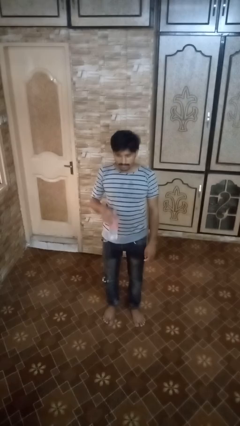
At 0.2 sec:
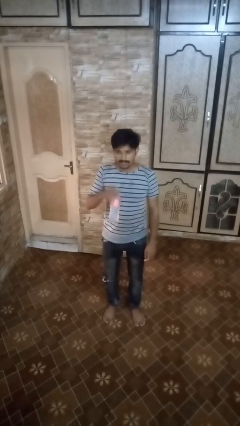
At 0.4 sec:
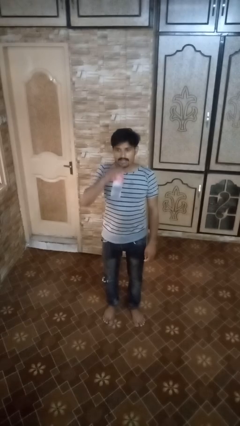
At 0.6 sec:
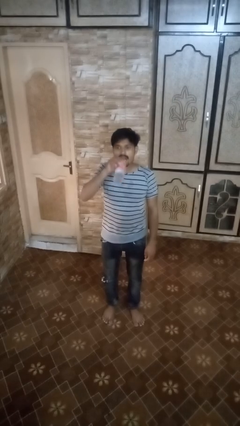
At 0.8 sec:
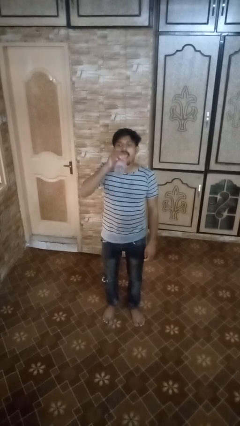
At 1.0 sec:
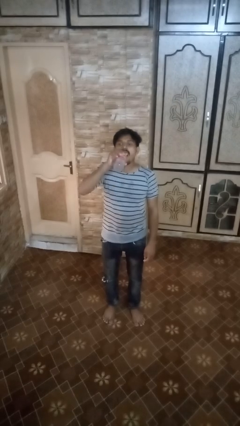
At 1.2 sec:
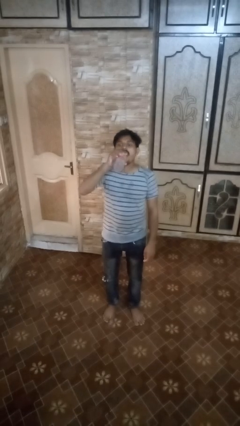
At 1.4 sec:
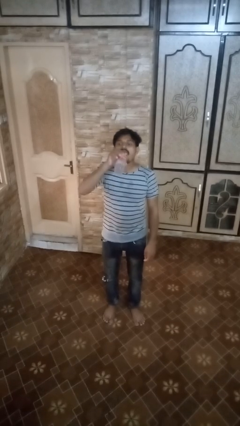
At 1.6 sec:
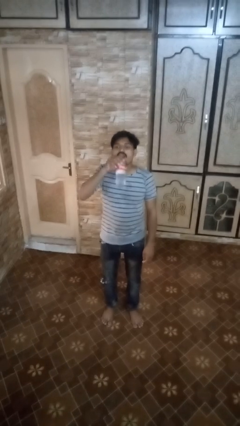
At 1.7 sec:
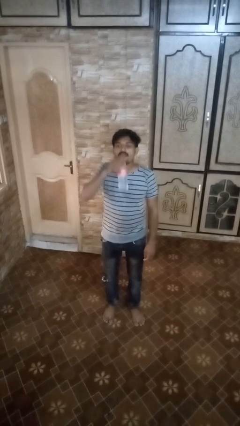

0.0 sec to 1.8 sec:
person drinks from bottle

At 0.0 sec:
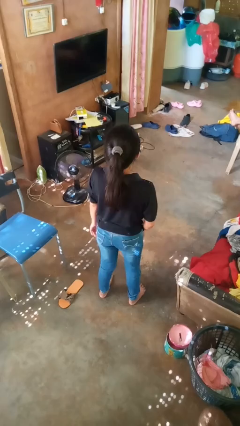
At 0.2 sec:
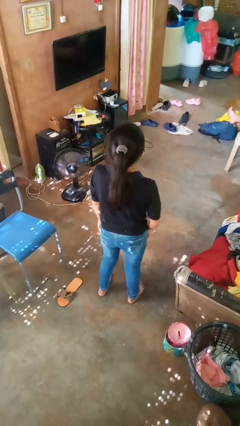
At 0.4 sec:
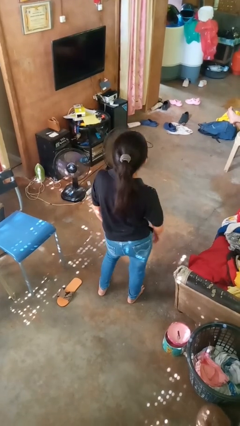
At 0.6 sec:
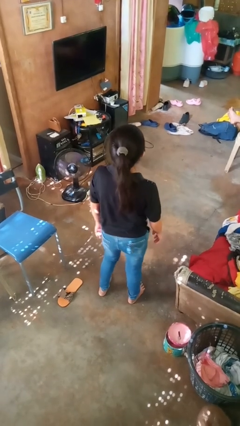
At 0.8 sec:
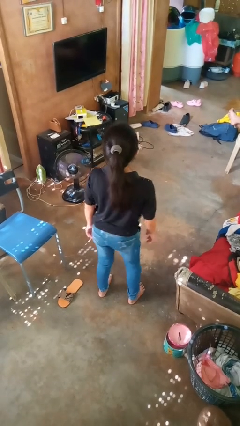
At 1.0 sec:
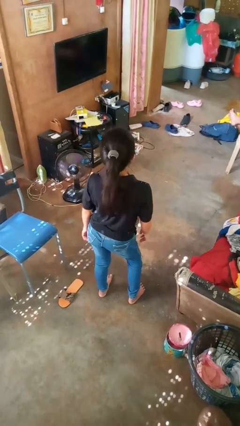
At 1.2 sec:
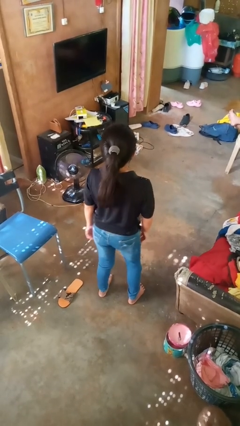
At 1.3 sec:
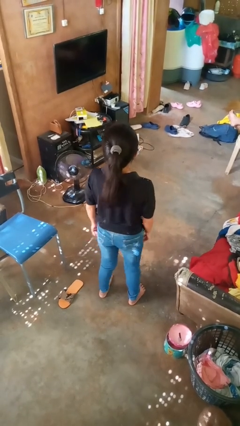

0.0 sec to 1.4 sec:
person wiggles hips

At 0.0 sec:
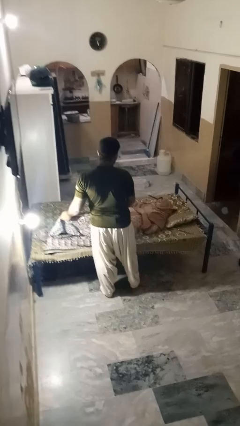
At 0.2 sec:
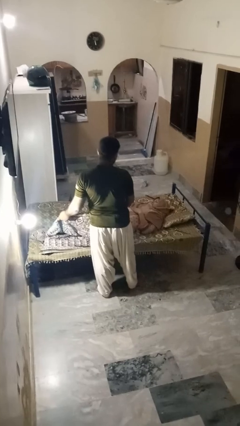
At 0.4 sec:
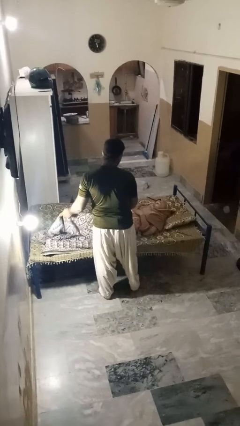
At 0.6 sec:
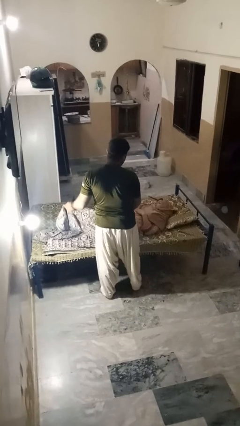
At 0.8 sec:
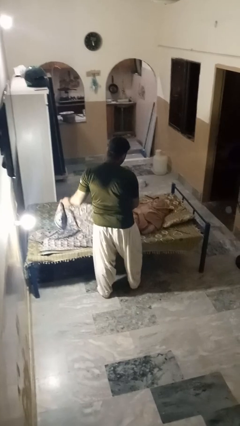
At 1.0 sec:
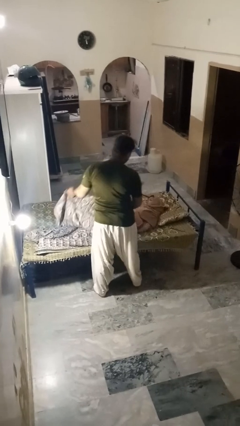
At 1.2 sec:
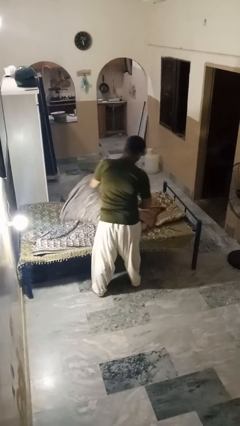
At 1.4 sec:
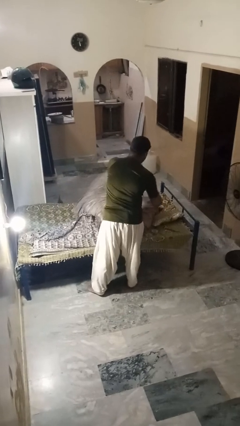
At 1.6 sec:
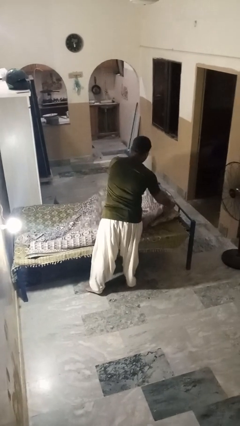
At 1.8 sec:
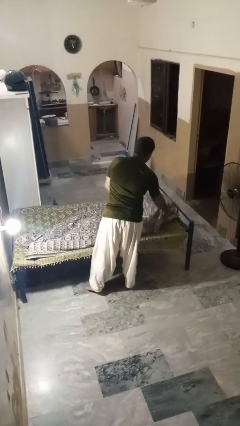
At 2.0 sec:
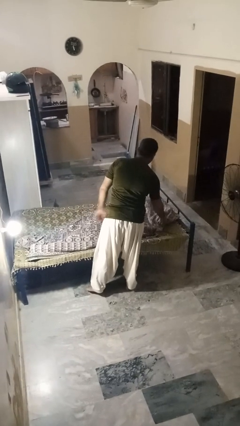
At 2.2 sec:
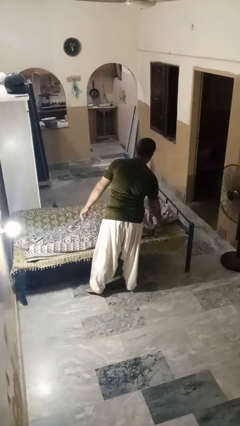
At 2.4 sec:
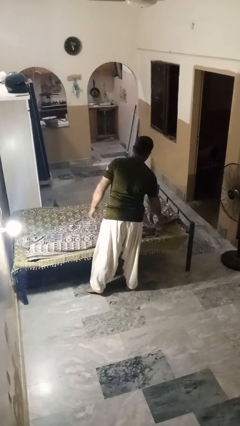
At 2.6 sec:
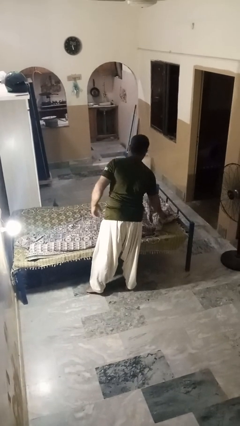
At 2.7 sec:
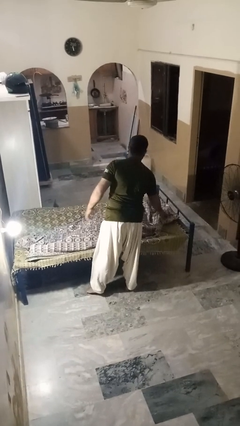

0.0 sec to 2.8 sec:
person covers friend with blanket

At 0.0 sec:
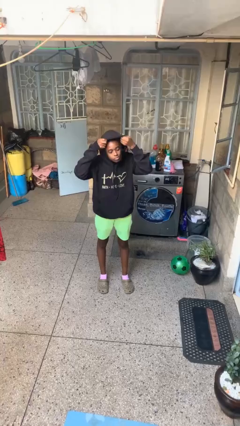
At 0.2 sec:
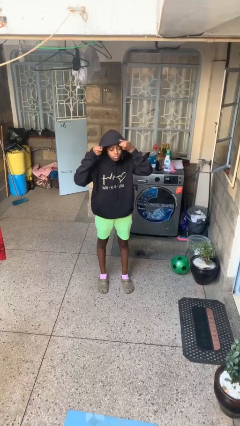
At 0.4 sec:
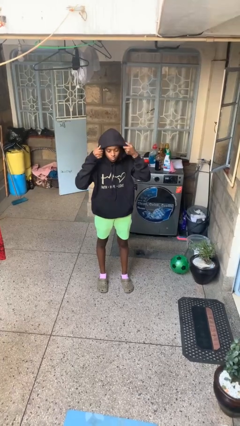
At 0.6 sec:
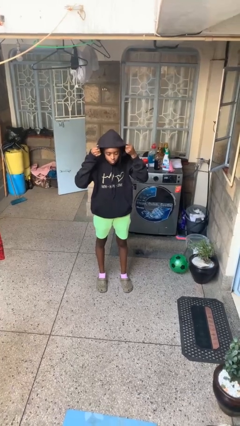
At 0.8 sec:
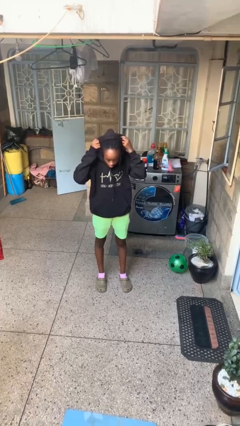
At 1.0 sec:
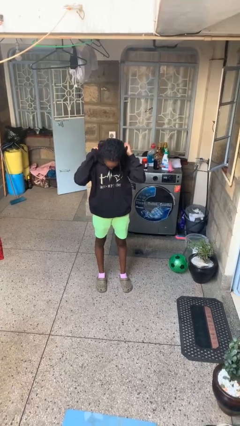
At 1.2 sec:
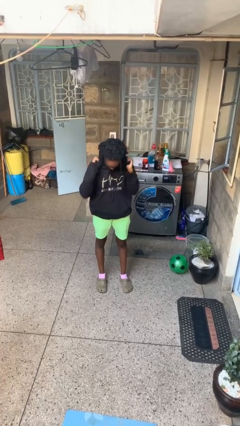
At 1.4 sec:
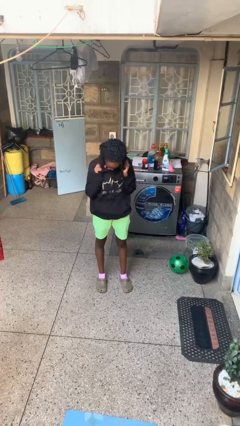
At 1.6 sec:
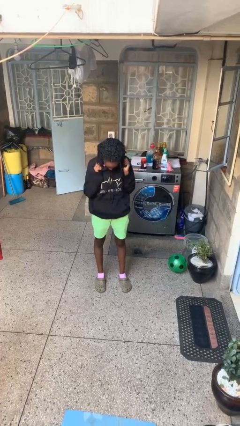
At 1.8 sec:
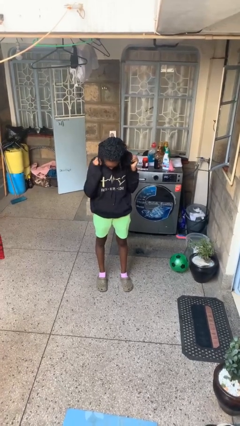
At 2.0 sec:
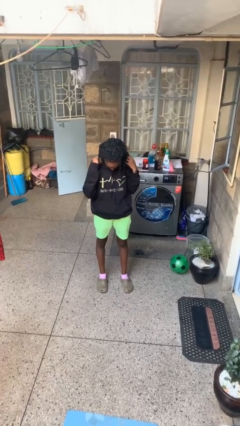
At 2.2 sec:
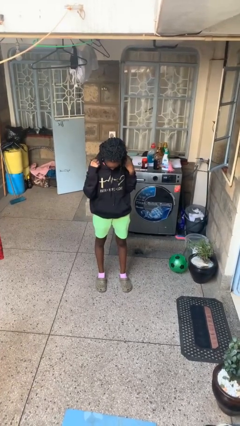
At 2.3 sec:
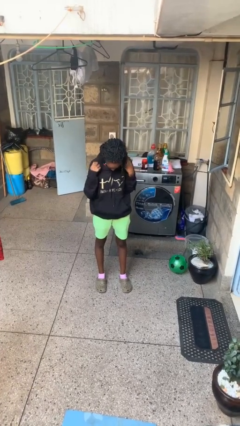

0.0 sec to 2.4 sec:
person takes off hoodie

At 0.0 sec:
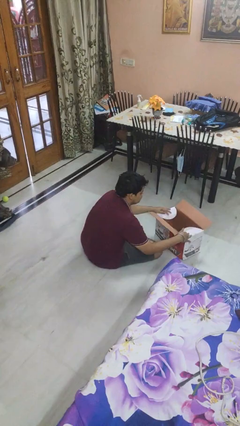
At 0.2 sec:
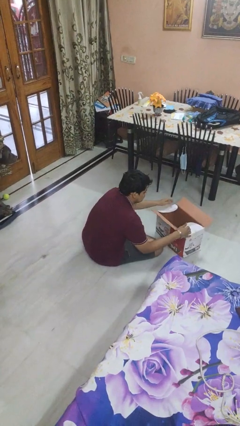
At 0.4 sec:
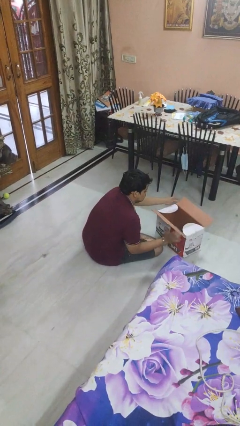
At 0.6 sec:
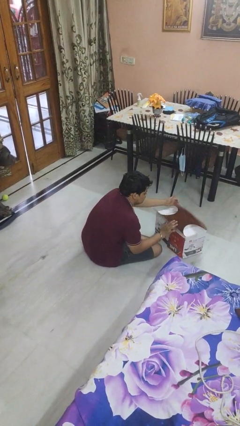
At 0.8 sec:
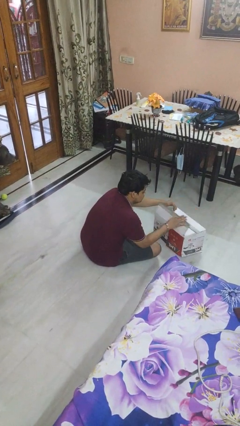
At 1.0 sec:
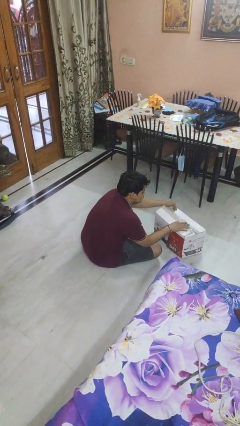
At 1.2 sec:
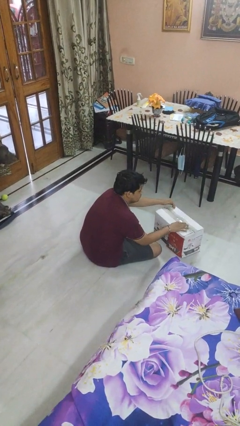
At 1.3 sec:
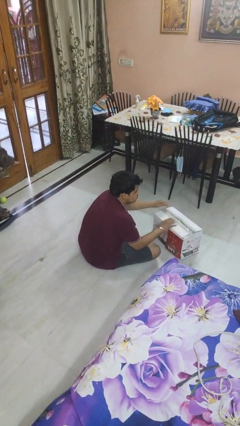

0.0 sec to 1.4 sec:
person closes box

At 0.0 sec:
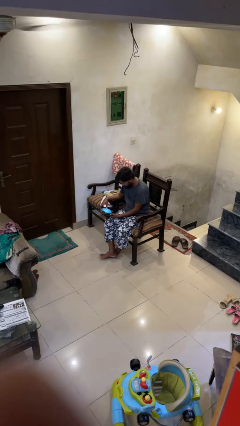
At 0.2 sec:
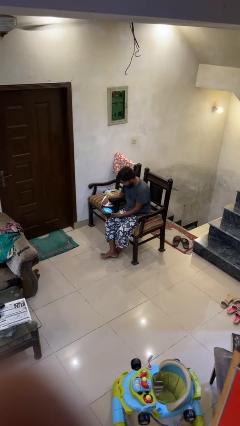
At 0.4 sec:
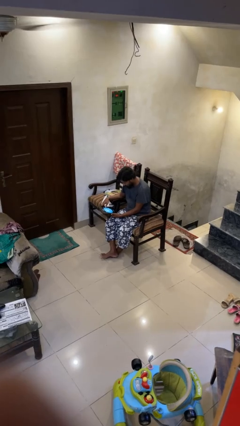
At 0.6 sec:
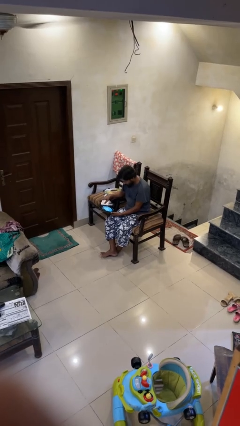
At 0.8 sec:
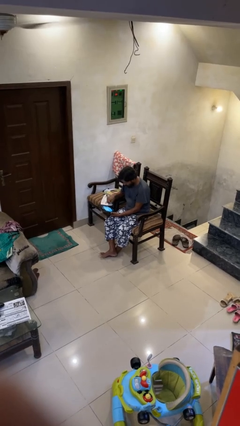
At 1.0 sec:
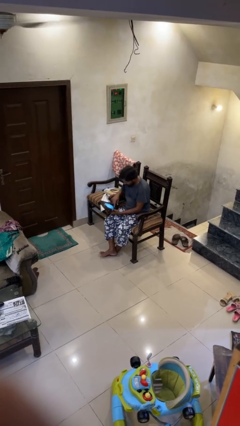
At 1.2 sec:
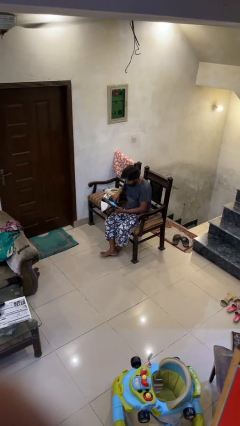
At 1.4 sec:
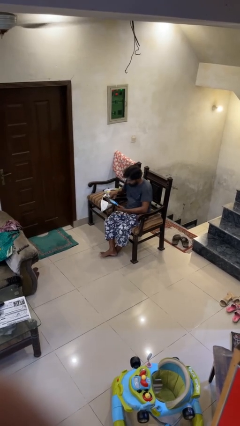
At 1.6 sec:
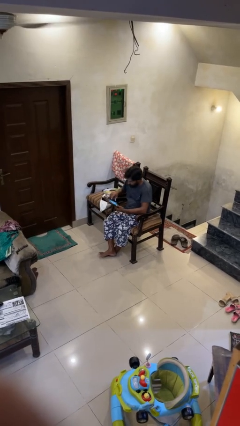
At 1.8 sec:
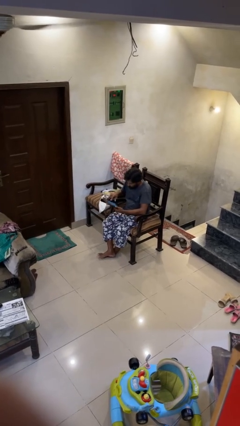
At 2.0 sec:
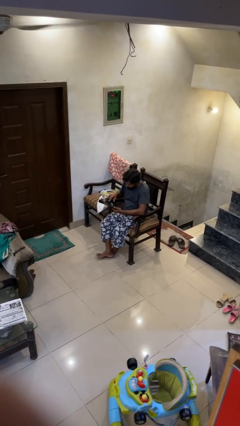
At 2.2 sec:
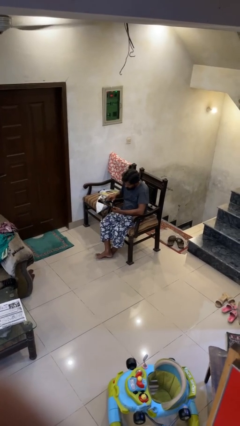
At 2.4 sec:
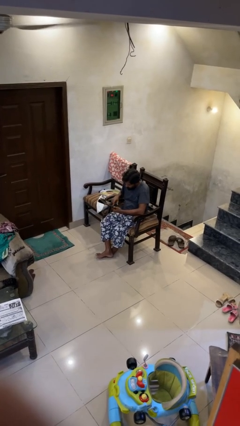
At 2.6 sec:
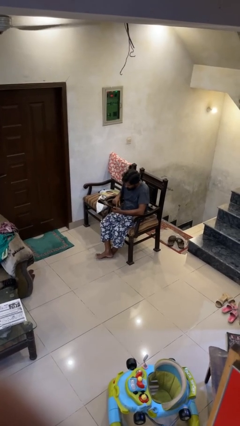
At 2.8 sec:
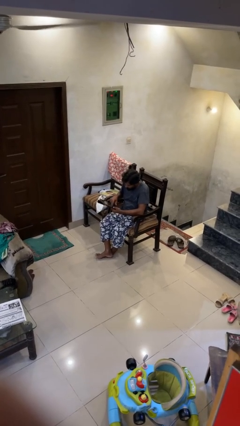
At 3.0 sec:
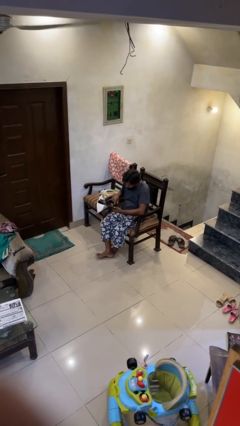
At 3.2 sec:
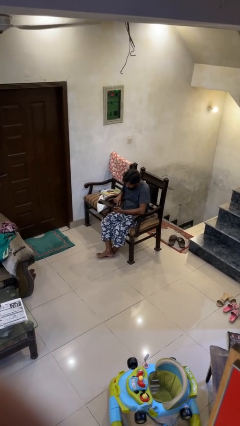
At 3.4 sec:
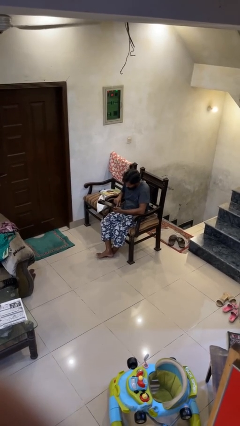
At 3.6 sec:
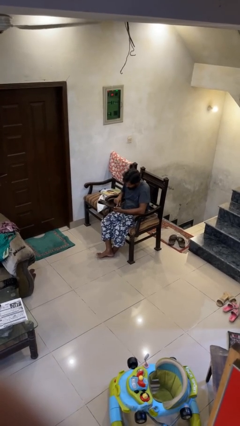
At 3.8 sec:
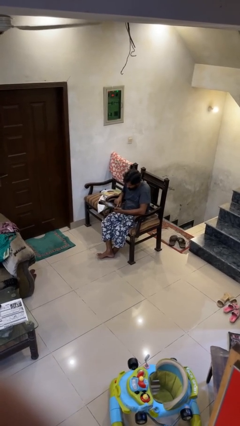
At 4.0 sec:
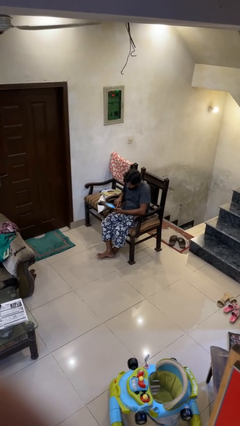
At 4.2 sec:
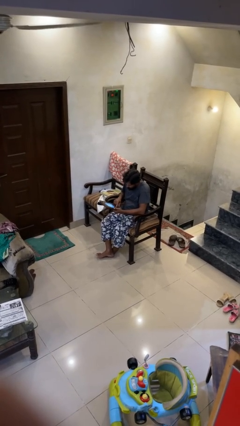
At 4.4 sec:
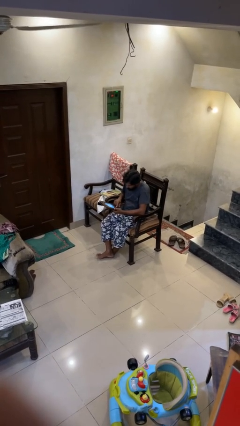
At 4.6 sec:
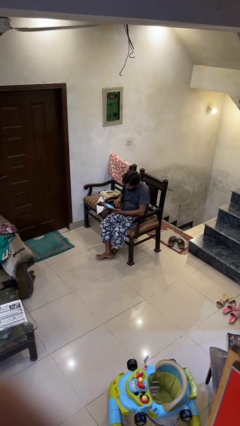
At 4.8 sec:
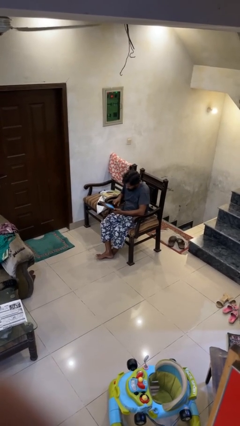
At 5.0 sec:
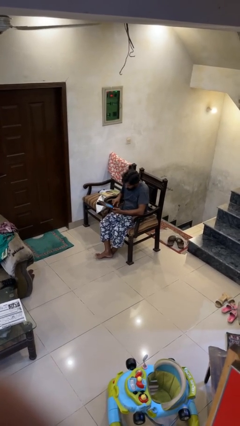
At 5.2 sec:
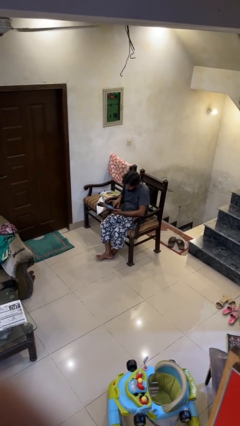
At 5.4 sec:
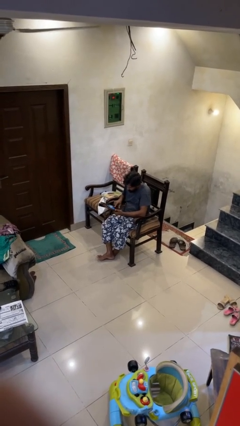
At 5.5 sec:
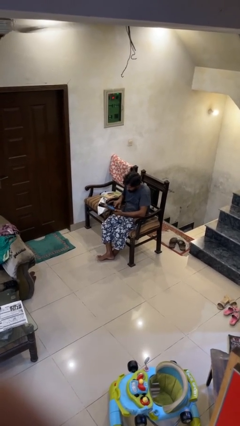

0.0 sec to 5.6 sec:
person interacts with tablet

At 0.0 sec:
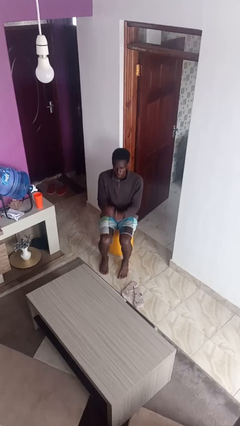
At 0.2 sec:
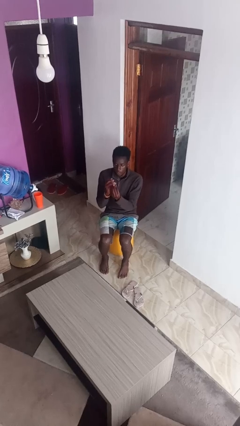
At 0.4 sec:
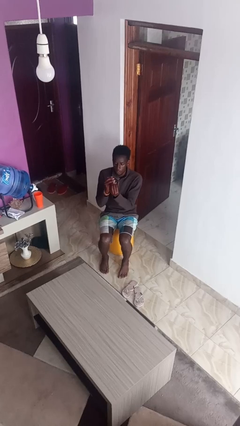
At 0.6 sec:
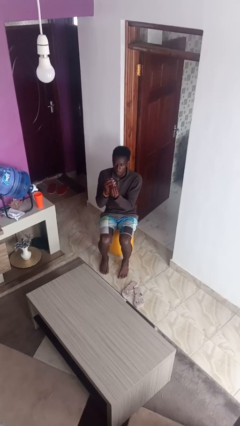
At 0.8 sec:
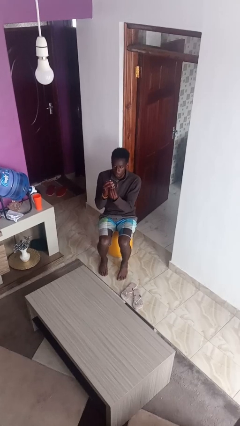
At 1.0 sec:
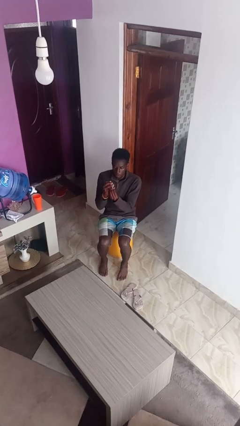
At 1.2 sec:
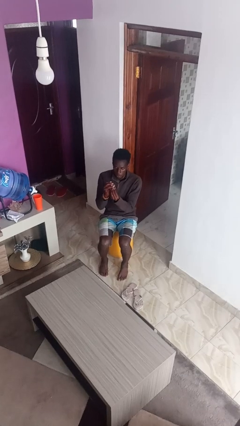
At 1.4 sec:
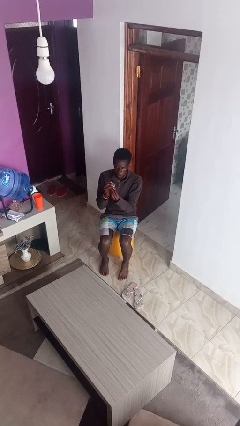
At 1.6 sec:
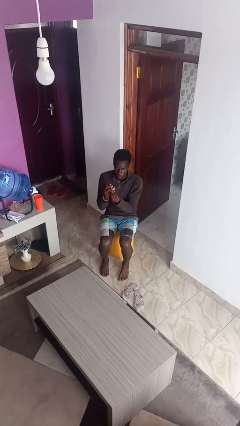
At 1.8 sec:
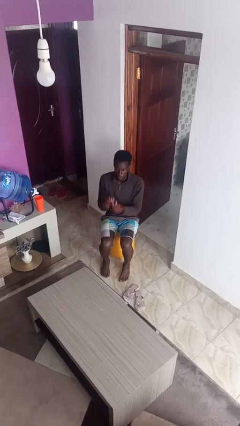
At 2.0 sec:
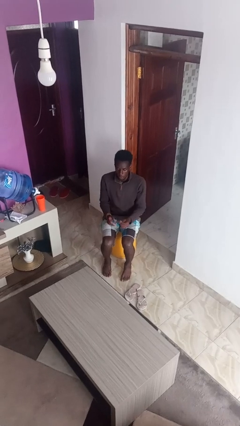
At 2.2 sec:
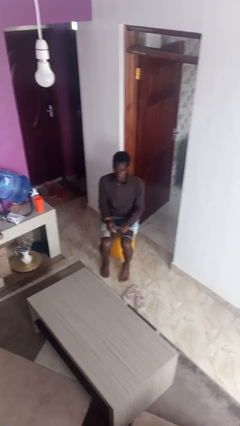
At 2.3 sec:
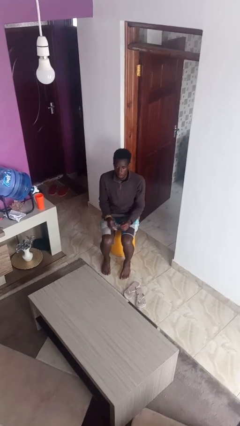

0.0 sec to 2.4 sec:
person clips fingernails
